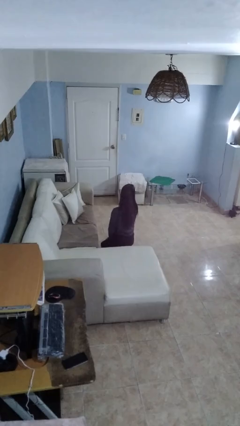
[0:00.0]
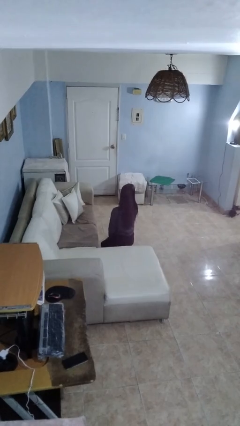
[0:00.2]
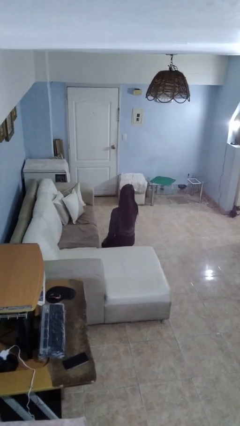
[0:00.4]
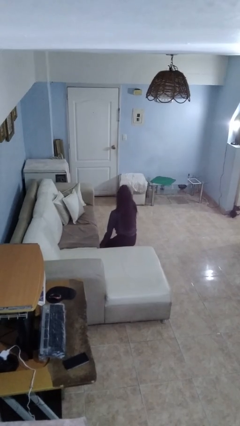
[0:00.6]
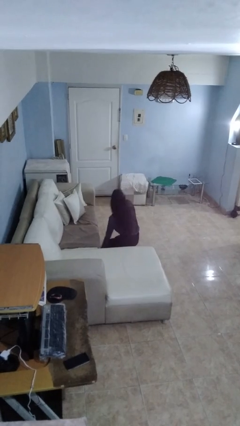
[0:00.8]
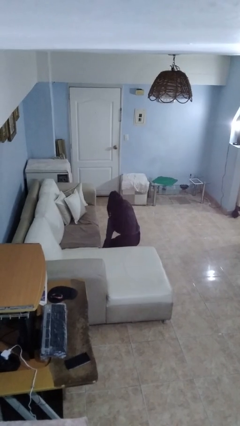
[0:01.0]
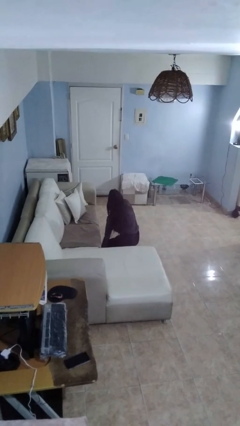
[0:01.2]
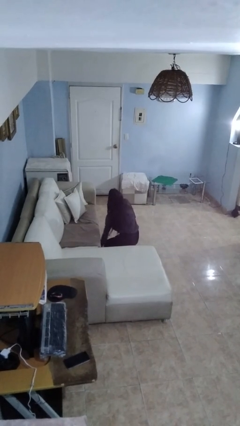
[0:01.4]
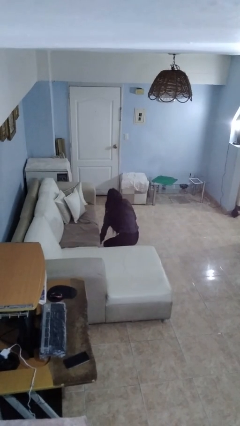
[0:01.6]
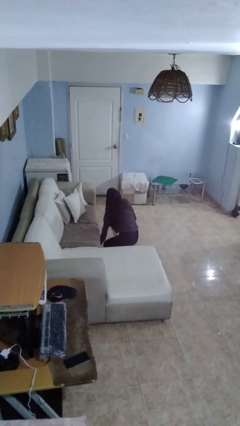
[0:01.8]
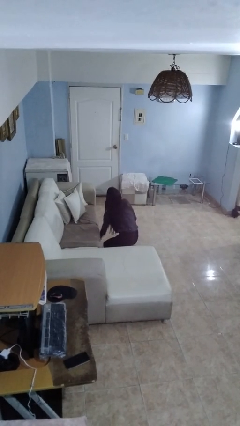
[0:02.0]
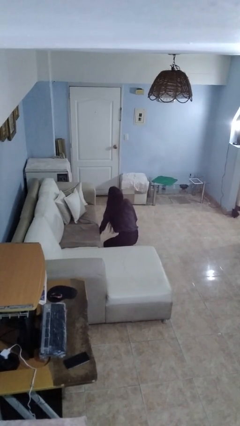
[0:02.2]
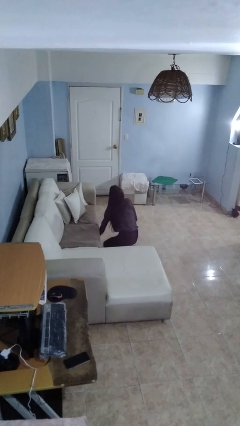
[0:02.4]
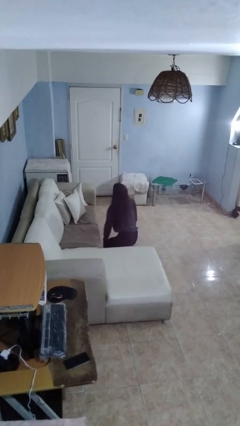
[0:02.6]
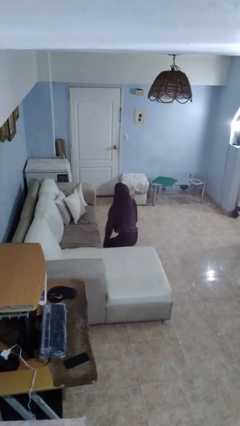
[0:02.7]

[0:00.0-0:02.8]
person searches under couch

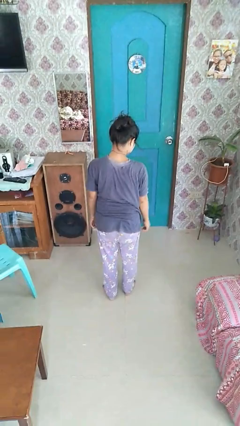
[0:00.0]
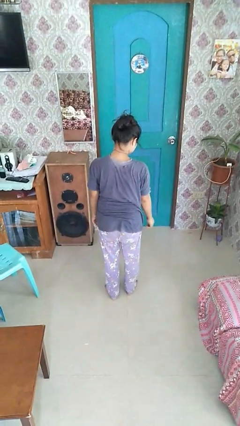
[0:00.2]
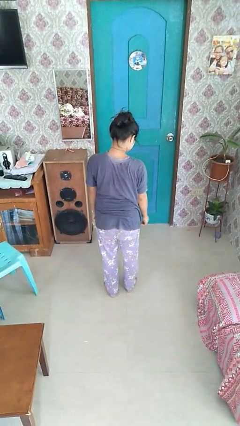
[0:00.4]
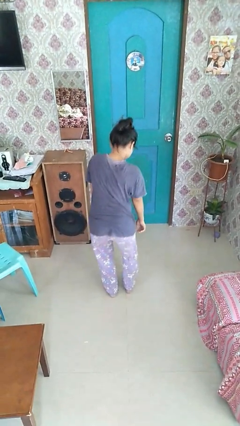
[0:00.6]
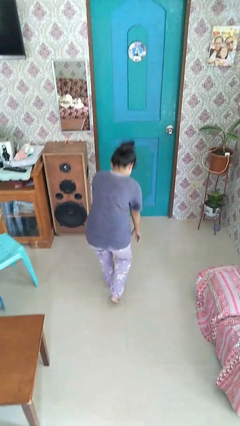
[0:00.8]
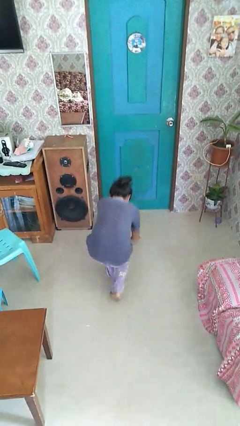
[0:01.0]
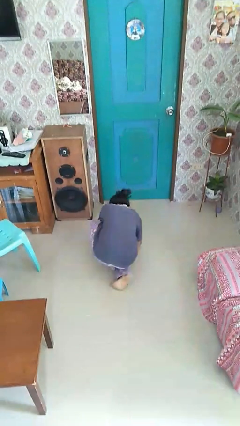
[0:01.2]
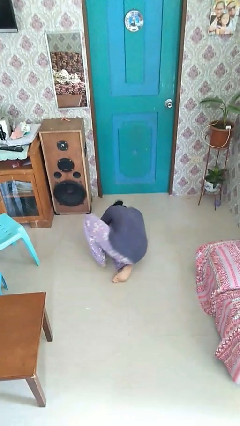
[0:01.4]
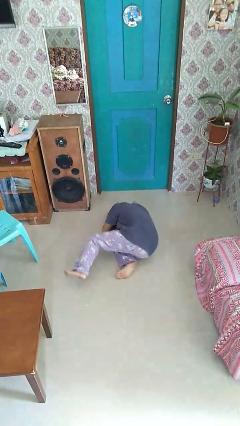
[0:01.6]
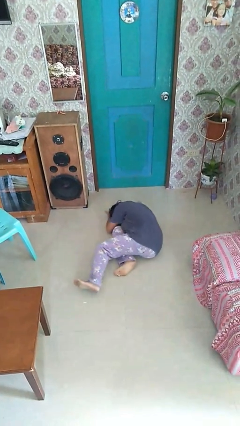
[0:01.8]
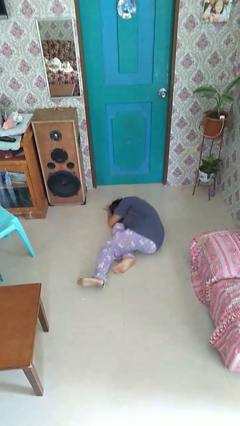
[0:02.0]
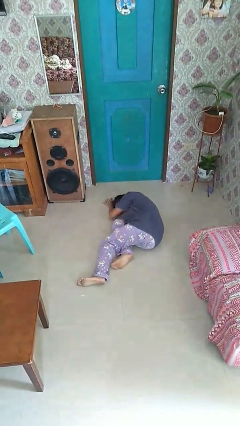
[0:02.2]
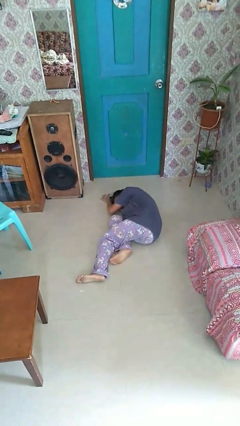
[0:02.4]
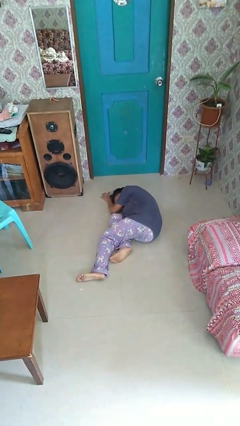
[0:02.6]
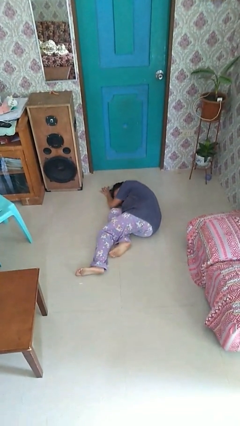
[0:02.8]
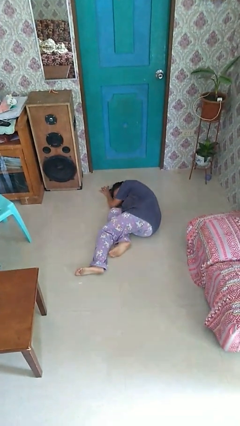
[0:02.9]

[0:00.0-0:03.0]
person falls while standing

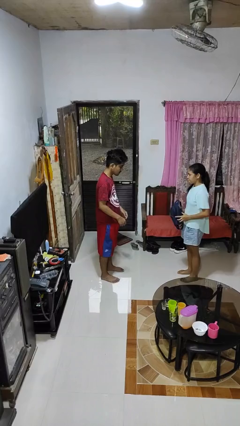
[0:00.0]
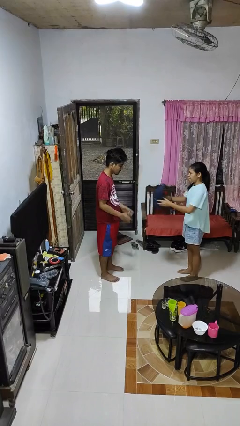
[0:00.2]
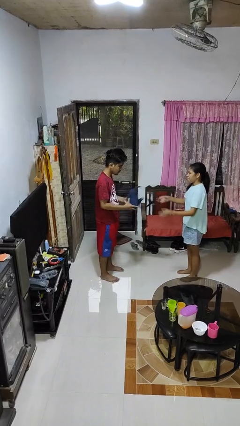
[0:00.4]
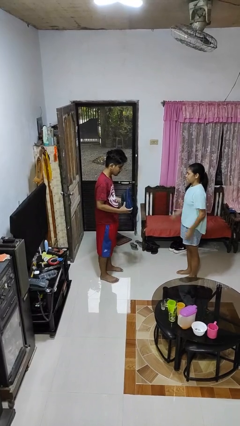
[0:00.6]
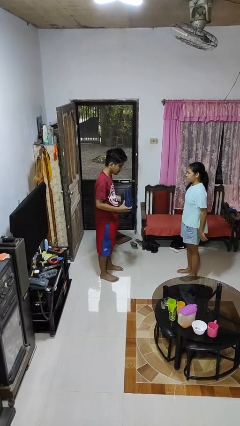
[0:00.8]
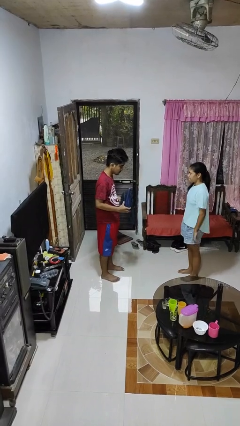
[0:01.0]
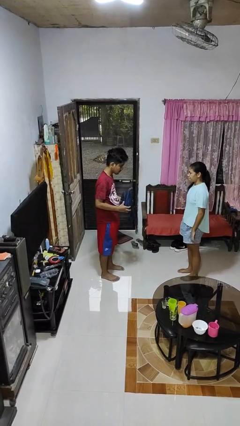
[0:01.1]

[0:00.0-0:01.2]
person catches object from person

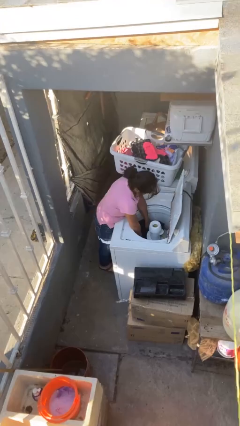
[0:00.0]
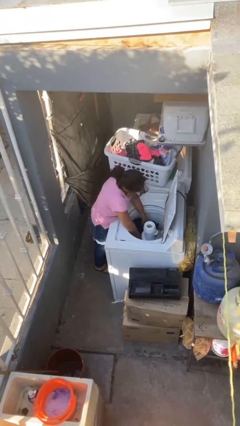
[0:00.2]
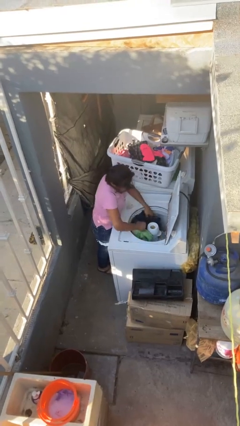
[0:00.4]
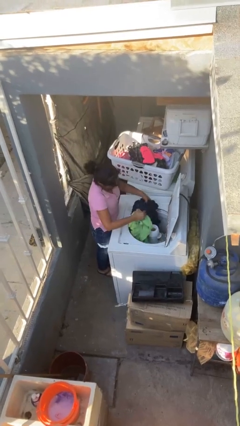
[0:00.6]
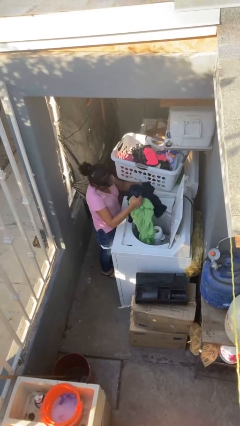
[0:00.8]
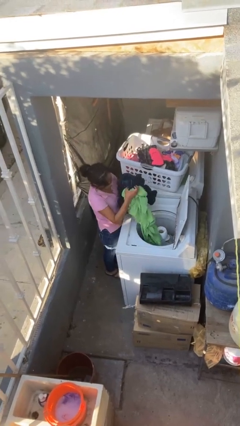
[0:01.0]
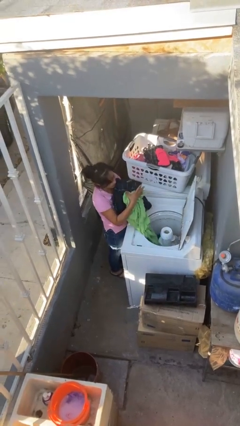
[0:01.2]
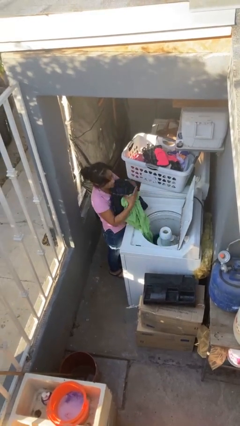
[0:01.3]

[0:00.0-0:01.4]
person loads clotheswasher

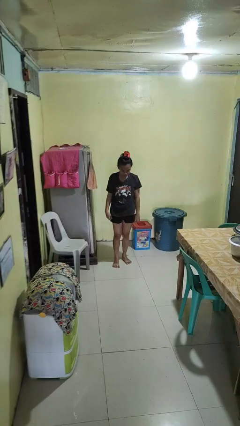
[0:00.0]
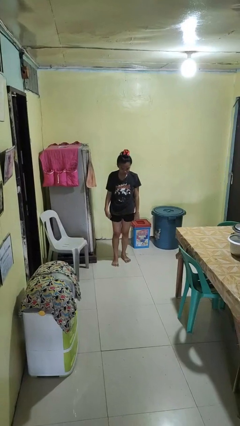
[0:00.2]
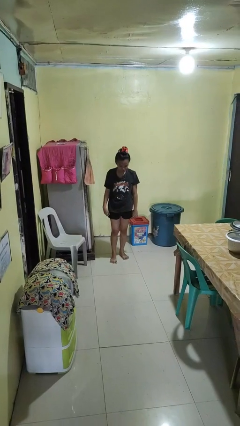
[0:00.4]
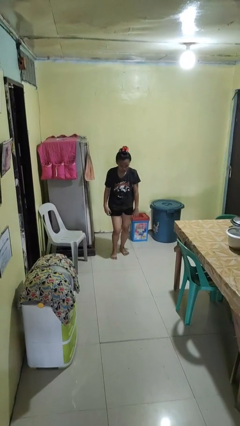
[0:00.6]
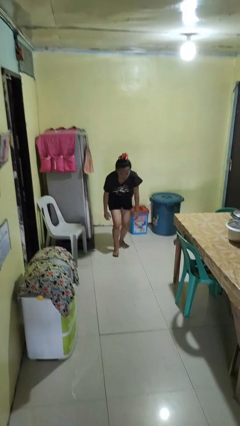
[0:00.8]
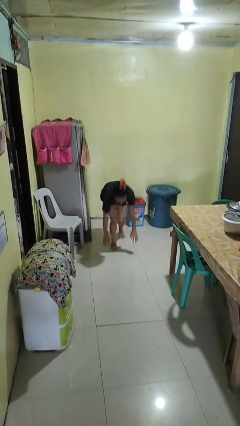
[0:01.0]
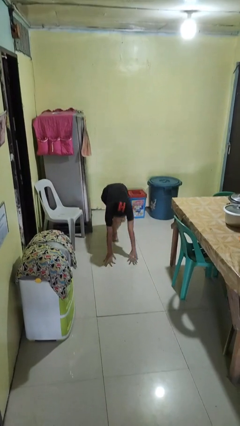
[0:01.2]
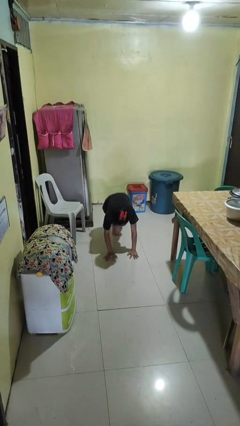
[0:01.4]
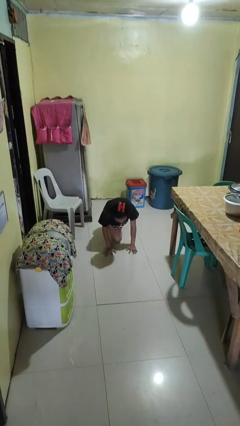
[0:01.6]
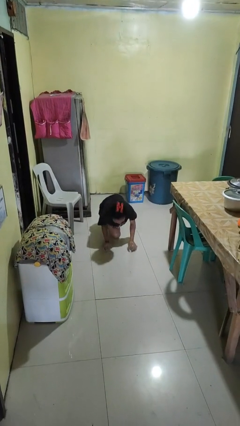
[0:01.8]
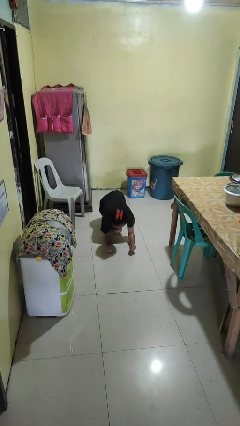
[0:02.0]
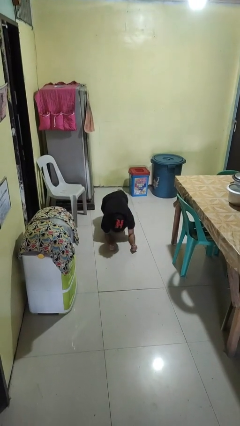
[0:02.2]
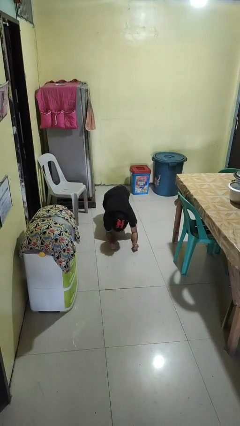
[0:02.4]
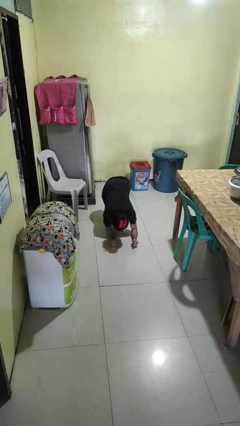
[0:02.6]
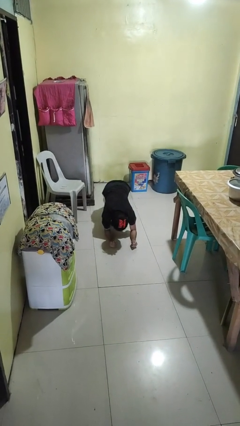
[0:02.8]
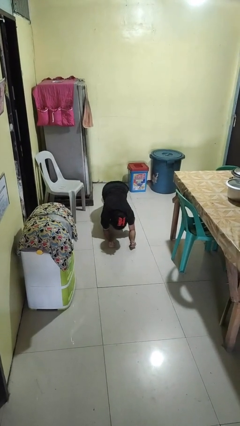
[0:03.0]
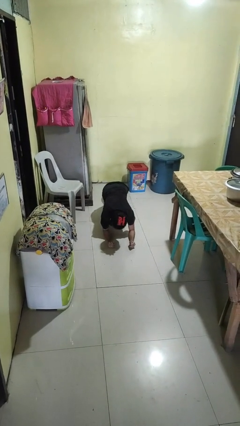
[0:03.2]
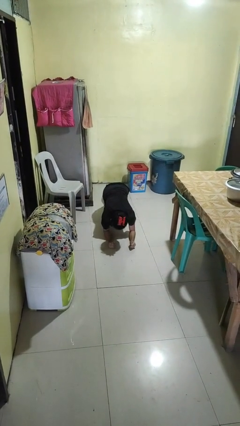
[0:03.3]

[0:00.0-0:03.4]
person exercises with plank

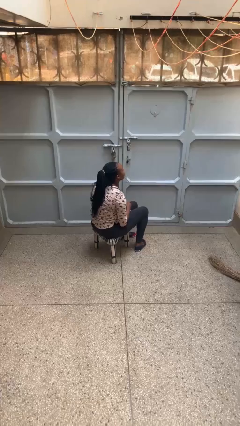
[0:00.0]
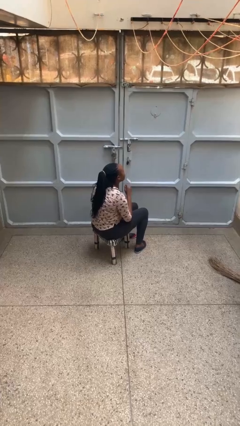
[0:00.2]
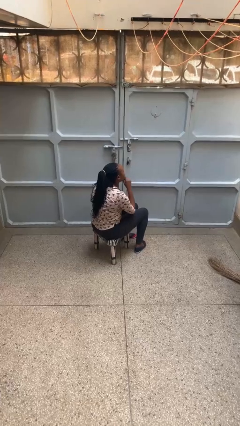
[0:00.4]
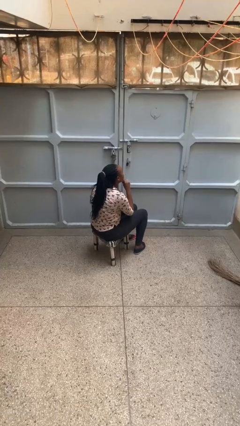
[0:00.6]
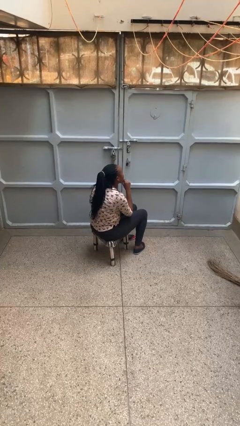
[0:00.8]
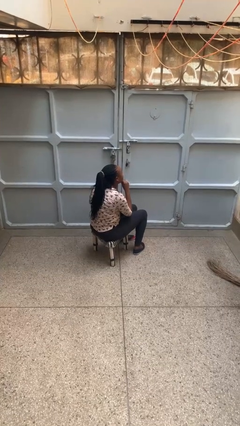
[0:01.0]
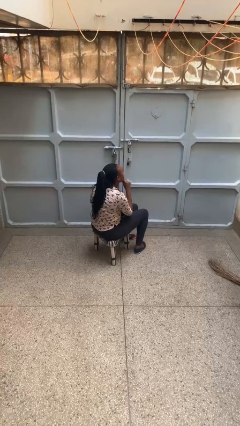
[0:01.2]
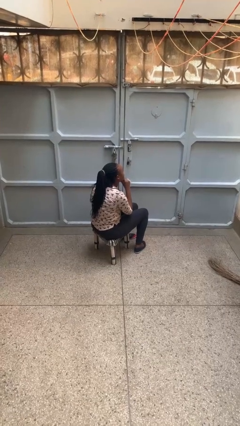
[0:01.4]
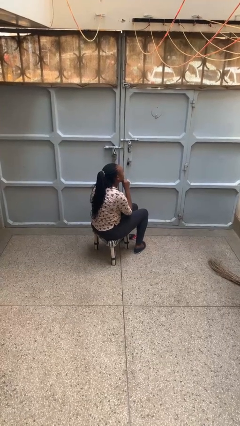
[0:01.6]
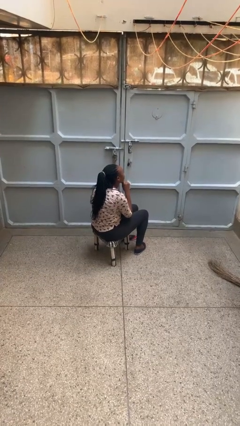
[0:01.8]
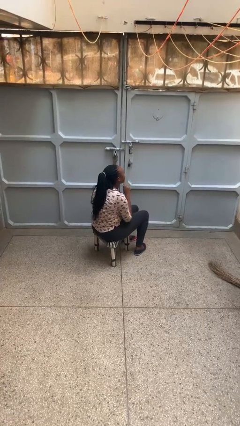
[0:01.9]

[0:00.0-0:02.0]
person strokes chin

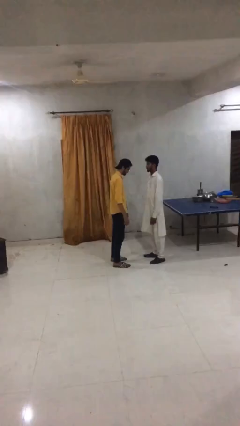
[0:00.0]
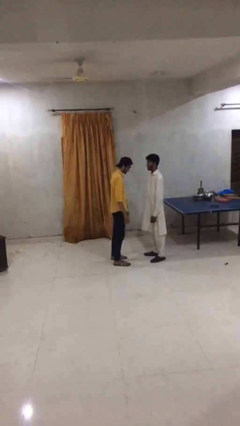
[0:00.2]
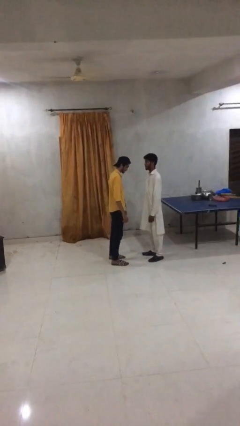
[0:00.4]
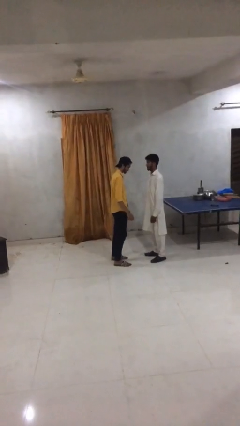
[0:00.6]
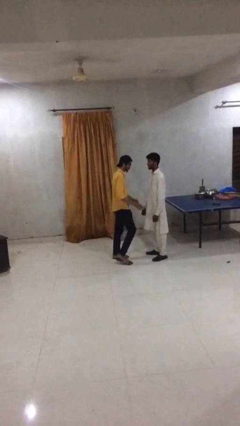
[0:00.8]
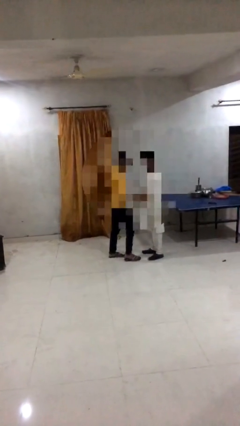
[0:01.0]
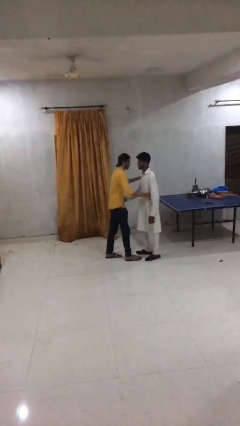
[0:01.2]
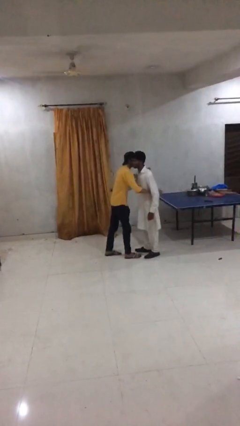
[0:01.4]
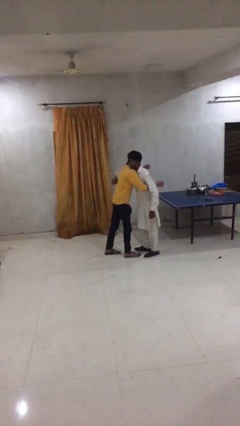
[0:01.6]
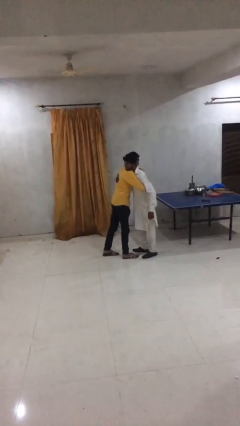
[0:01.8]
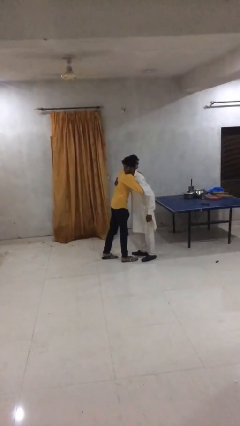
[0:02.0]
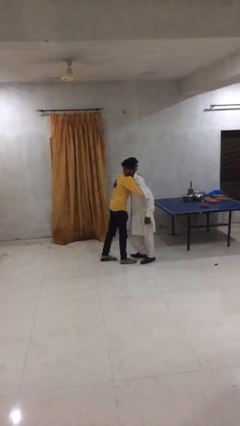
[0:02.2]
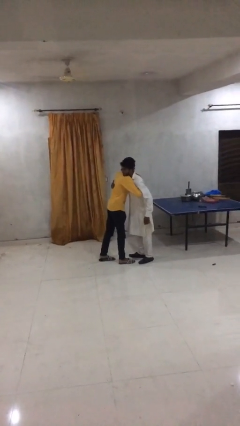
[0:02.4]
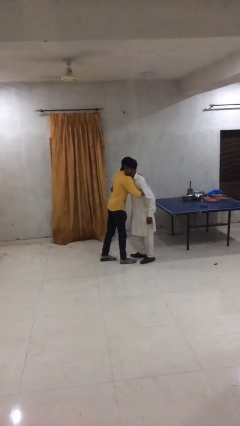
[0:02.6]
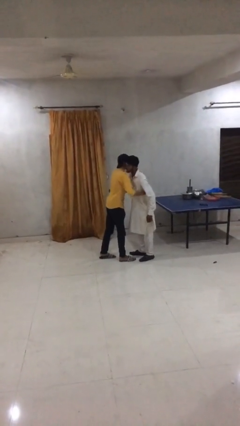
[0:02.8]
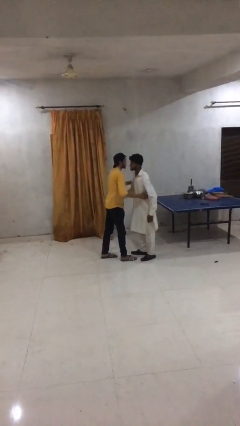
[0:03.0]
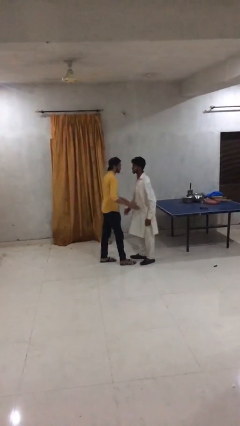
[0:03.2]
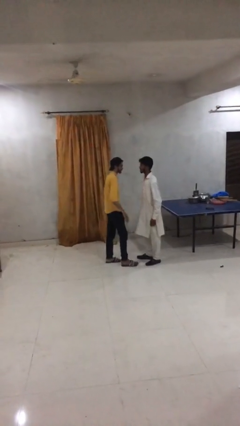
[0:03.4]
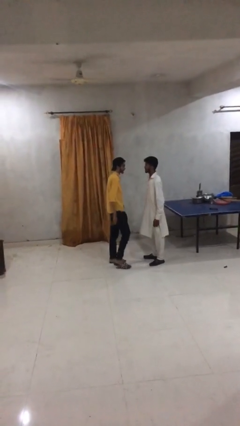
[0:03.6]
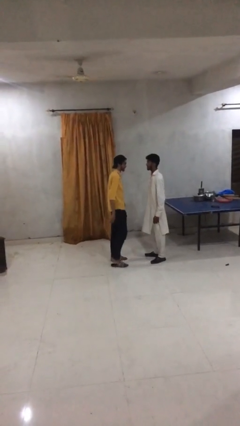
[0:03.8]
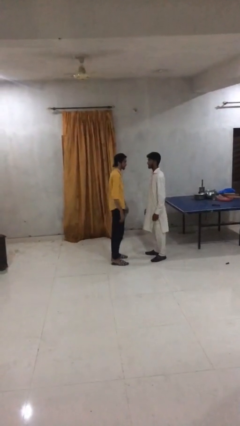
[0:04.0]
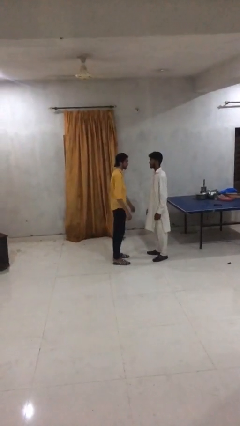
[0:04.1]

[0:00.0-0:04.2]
person embraces person
